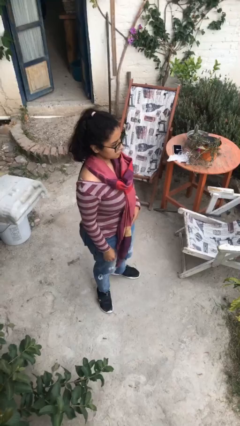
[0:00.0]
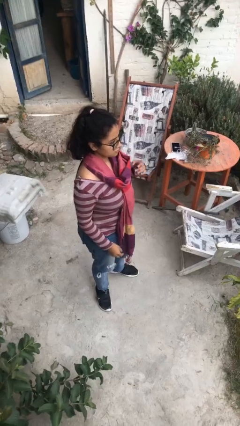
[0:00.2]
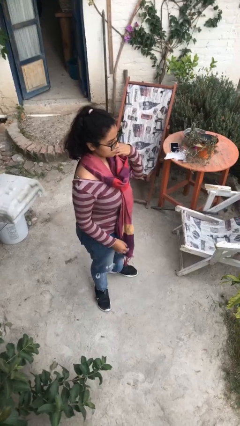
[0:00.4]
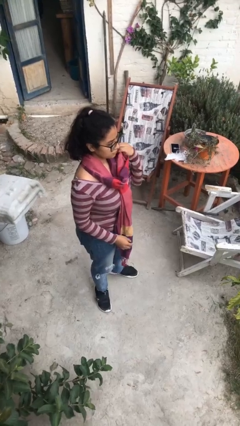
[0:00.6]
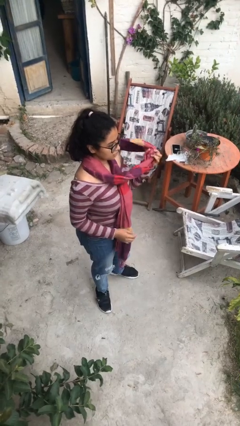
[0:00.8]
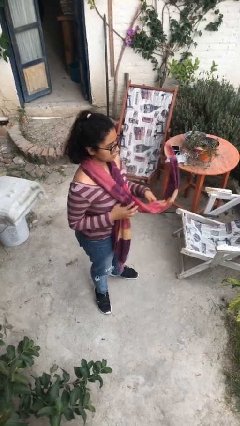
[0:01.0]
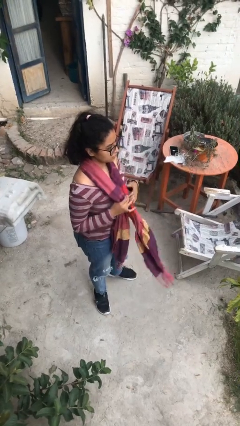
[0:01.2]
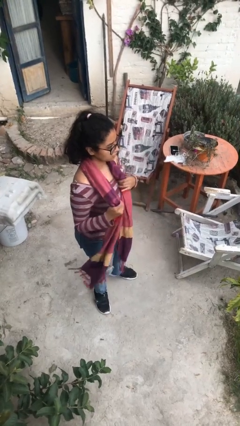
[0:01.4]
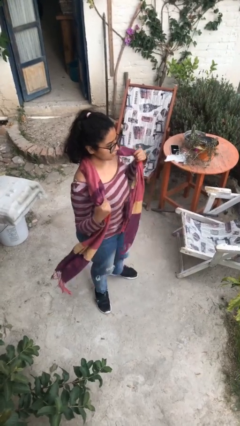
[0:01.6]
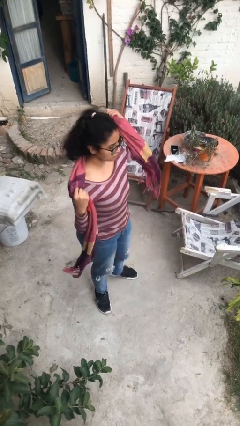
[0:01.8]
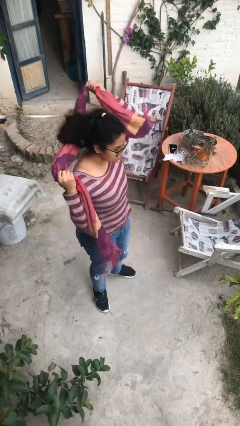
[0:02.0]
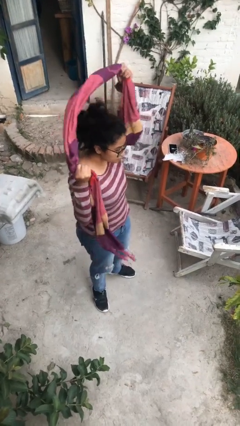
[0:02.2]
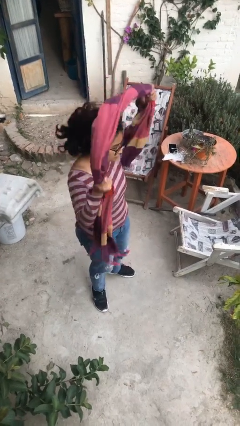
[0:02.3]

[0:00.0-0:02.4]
person takes off scarf

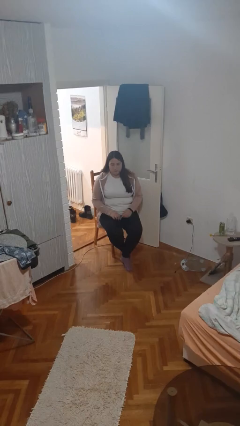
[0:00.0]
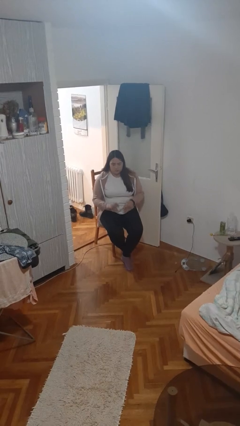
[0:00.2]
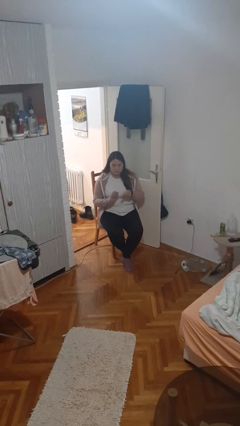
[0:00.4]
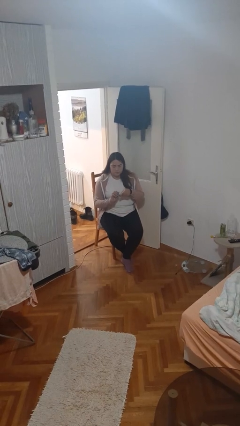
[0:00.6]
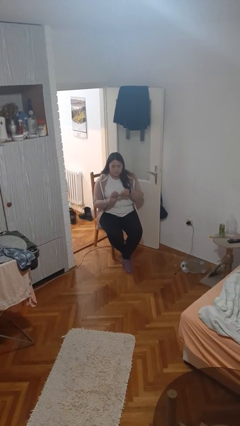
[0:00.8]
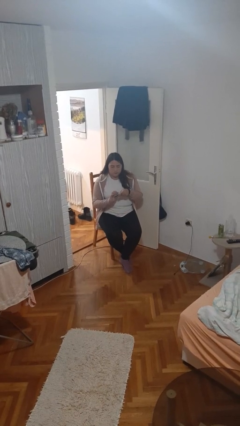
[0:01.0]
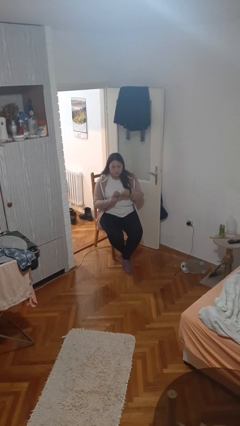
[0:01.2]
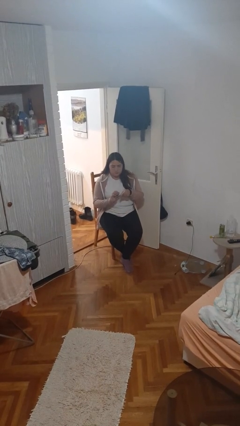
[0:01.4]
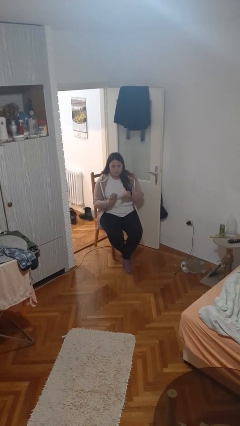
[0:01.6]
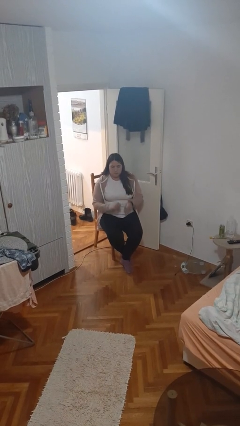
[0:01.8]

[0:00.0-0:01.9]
person files fingernails

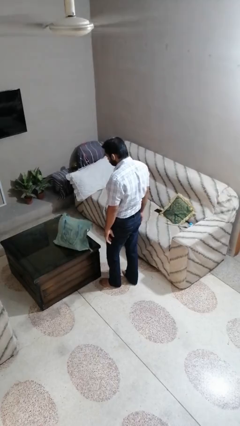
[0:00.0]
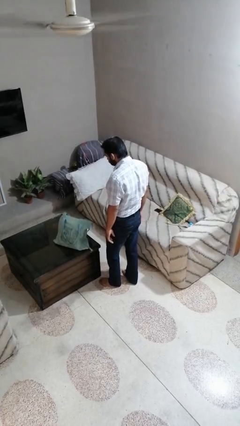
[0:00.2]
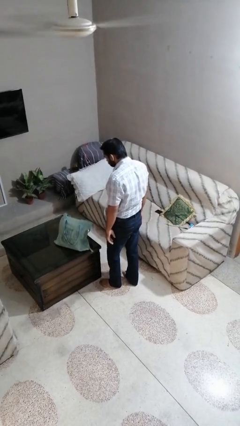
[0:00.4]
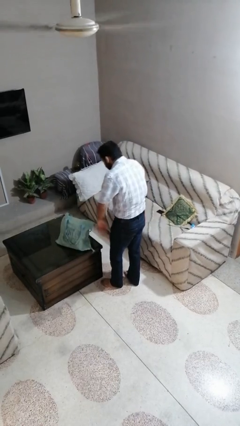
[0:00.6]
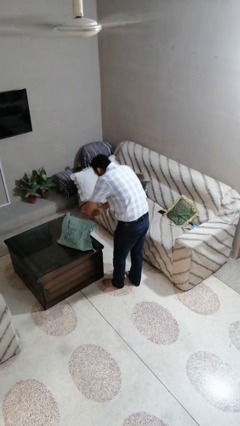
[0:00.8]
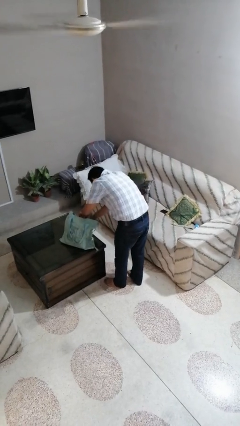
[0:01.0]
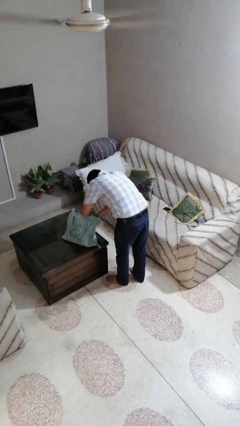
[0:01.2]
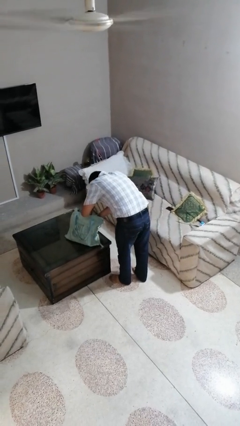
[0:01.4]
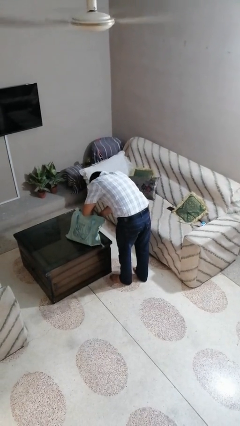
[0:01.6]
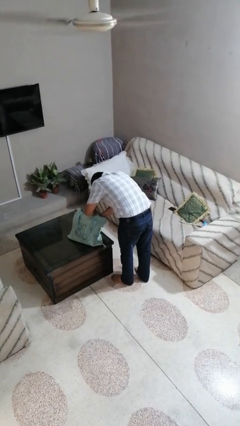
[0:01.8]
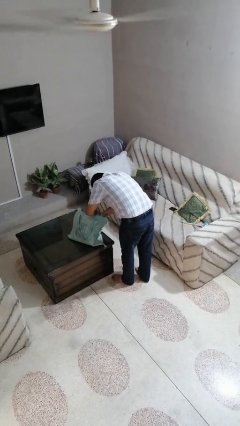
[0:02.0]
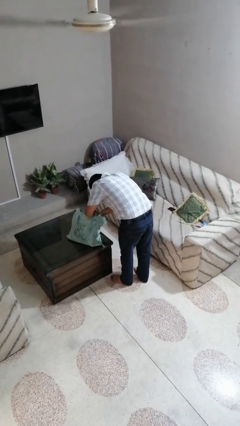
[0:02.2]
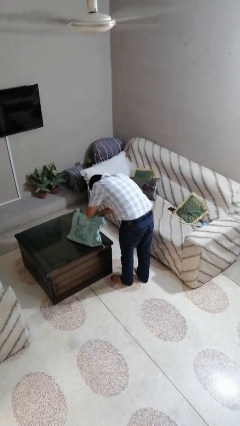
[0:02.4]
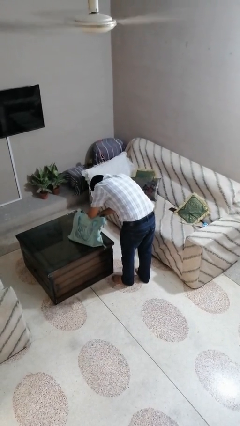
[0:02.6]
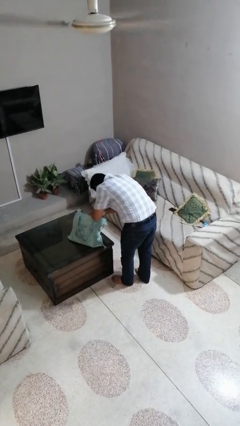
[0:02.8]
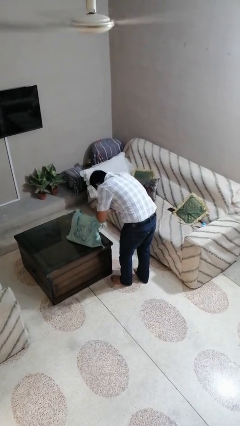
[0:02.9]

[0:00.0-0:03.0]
person searches in bag

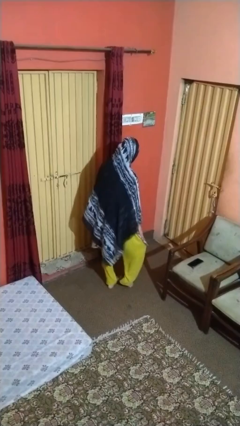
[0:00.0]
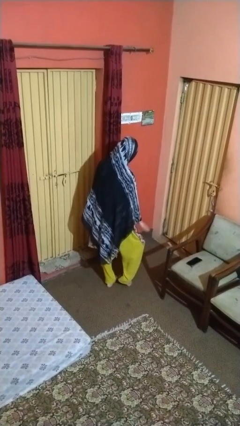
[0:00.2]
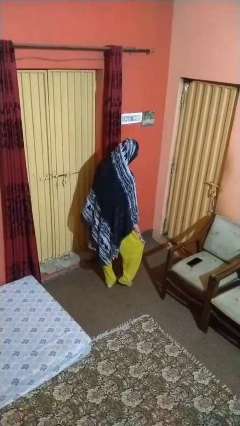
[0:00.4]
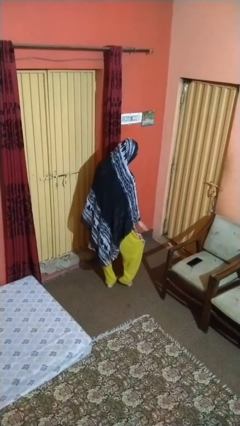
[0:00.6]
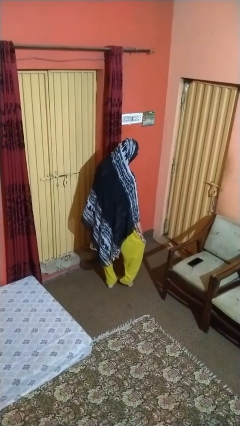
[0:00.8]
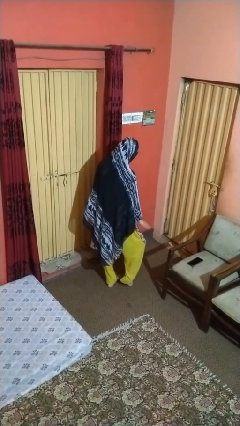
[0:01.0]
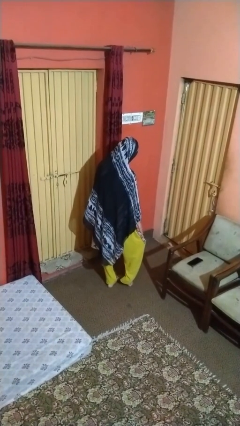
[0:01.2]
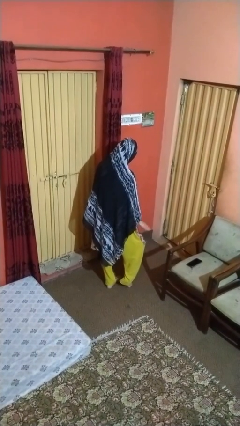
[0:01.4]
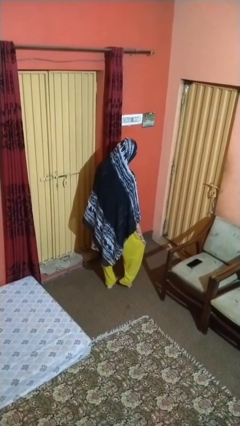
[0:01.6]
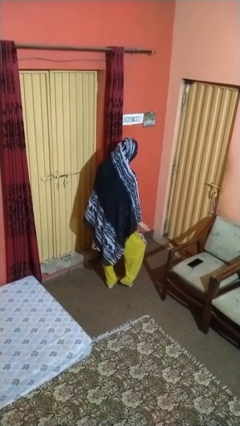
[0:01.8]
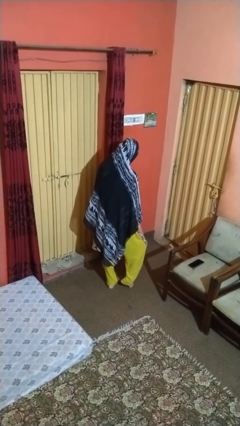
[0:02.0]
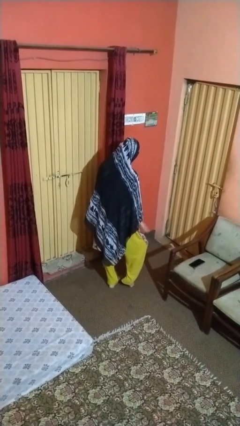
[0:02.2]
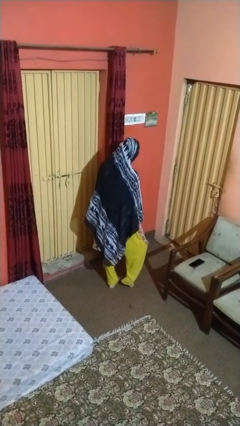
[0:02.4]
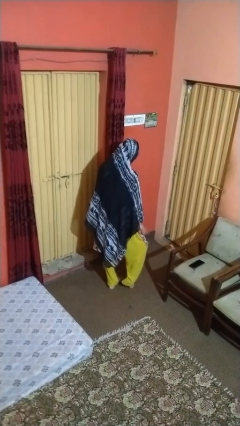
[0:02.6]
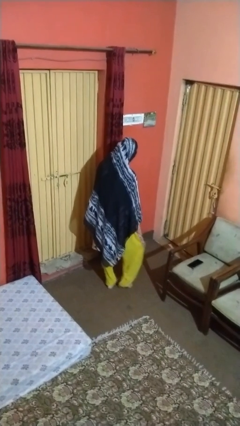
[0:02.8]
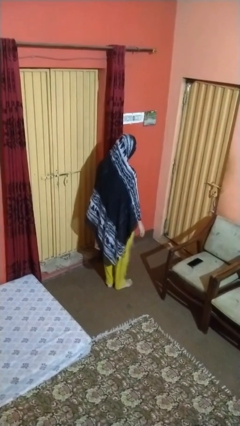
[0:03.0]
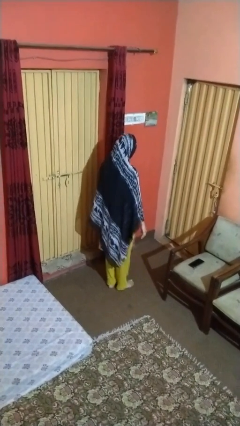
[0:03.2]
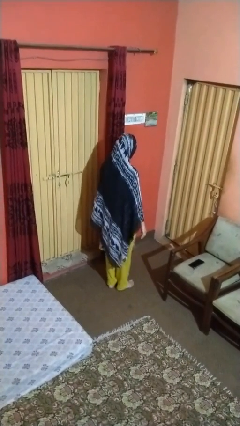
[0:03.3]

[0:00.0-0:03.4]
person slaps hands on thighs

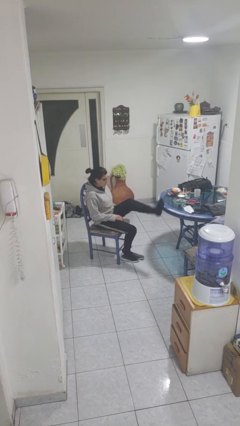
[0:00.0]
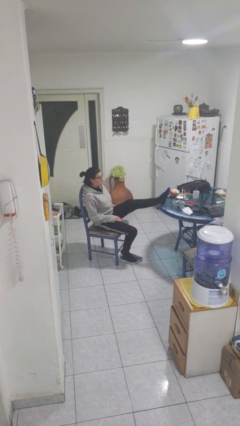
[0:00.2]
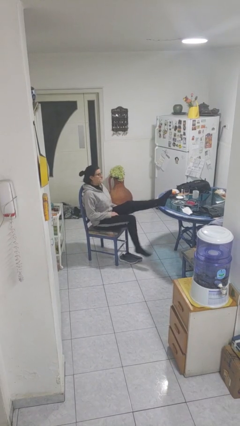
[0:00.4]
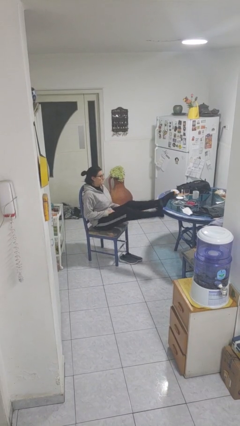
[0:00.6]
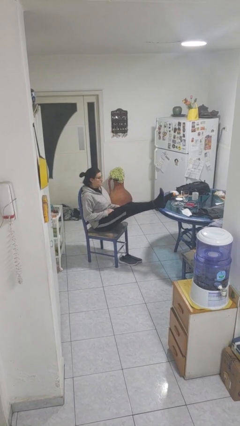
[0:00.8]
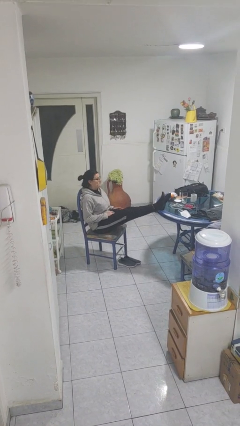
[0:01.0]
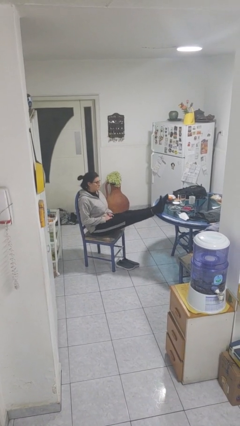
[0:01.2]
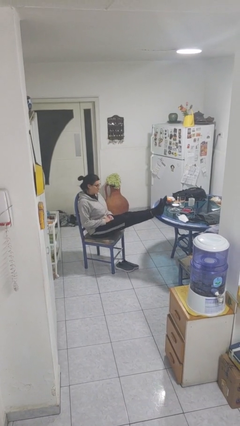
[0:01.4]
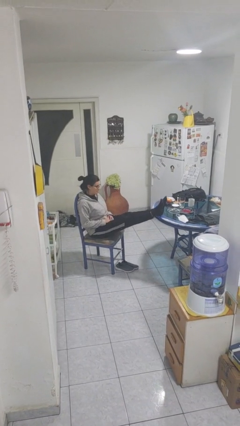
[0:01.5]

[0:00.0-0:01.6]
person puts feet up

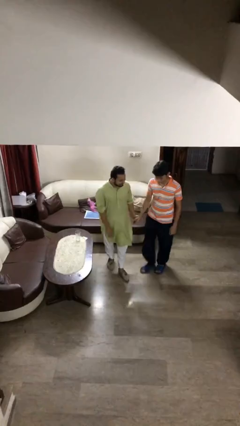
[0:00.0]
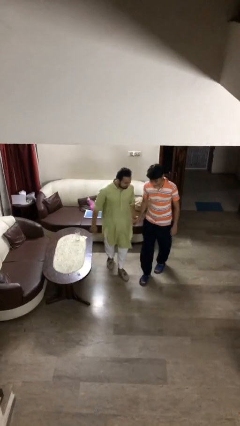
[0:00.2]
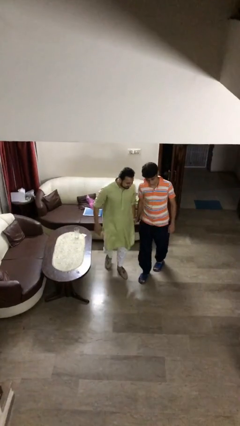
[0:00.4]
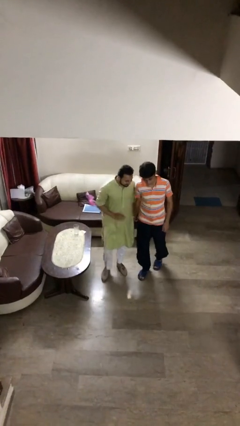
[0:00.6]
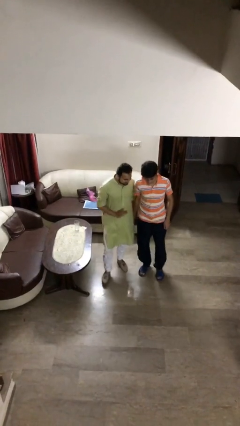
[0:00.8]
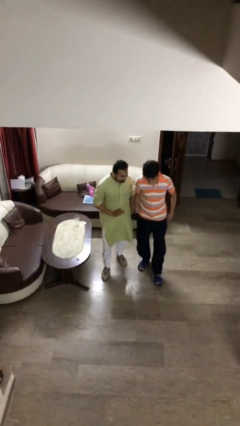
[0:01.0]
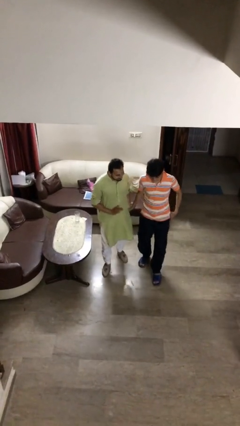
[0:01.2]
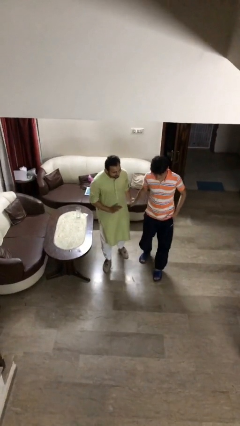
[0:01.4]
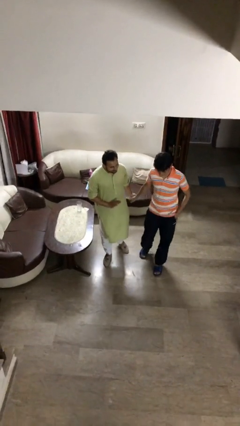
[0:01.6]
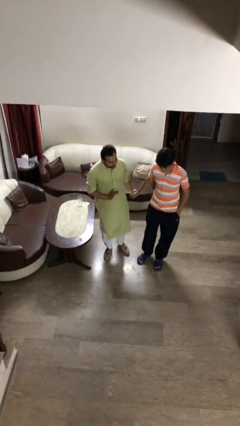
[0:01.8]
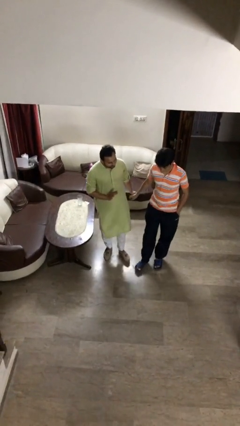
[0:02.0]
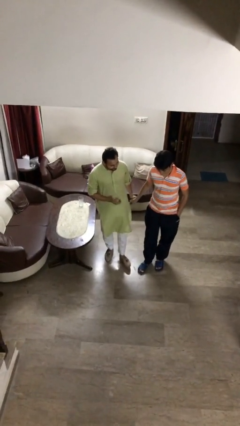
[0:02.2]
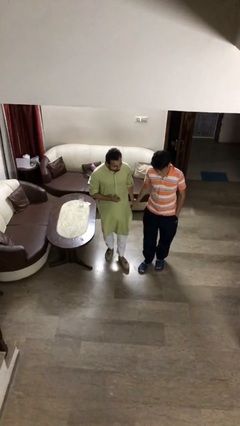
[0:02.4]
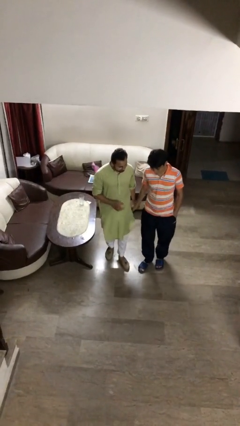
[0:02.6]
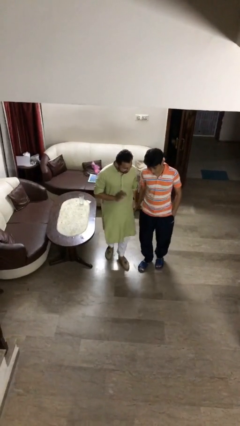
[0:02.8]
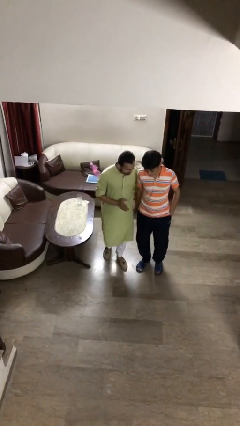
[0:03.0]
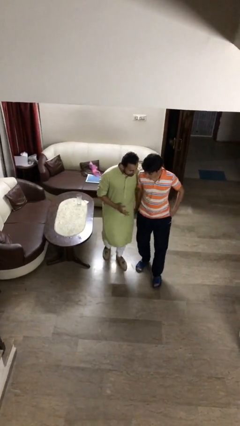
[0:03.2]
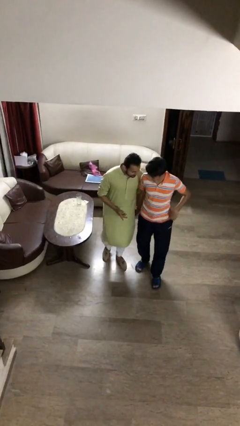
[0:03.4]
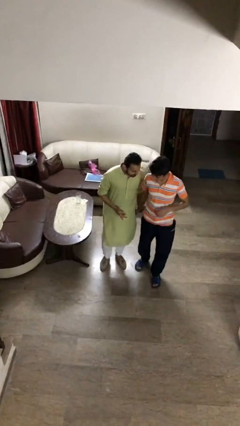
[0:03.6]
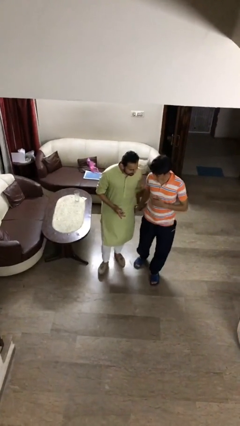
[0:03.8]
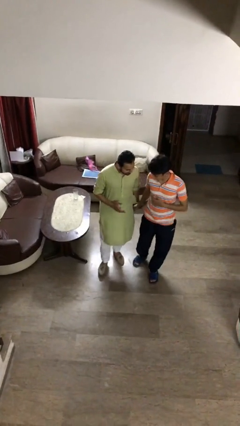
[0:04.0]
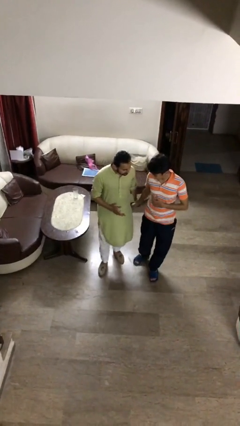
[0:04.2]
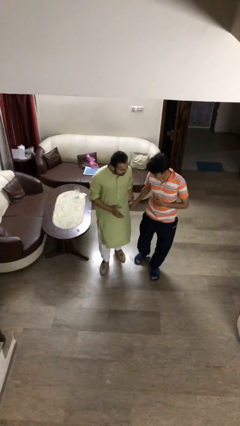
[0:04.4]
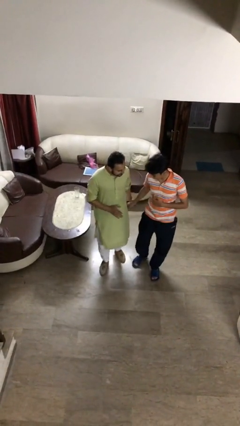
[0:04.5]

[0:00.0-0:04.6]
person talks to person

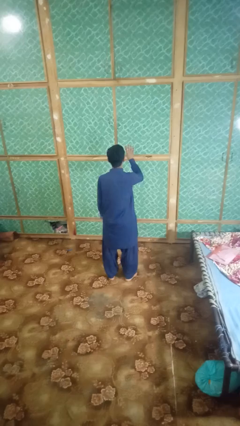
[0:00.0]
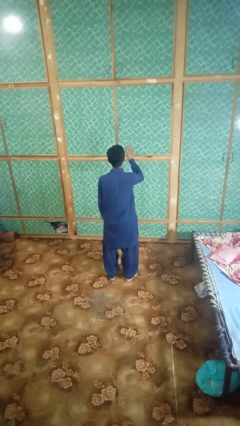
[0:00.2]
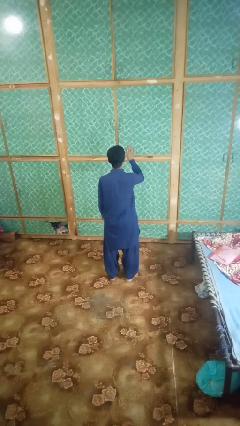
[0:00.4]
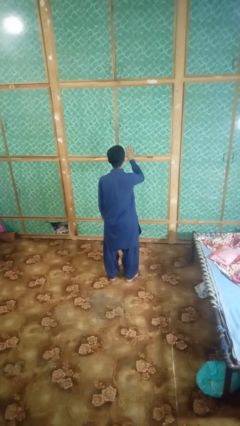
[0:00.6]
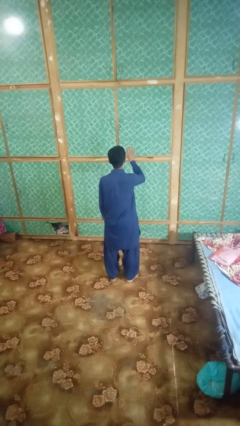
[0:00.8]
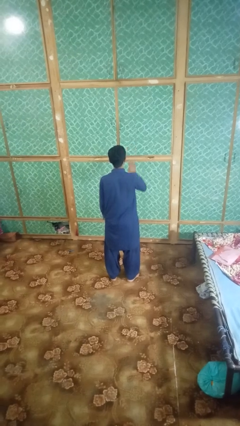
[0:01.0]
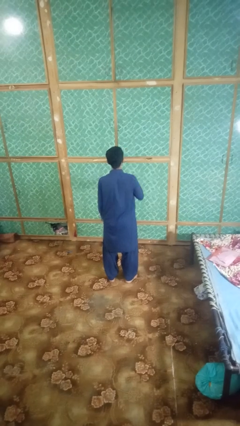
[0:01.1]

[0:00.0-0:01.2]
person gestures number four
